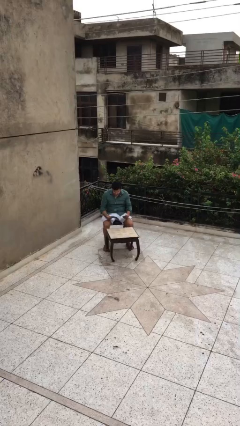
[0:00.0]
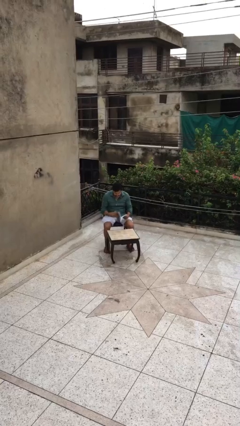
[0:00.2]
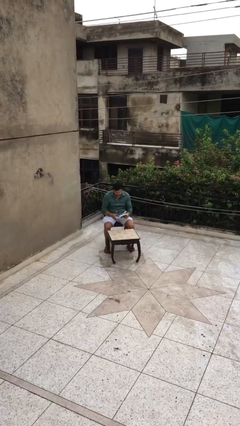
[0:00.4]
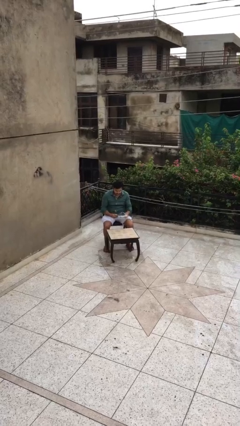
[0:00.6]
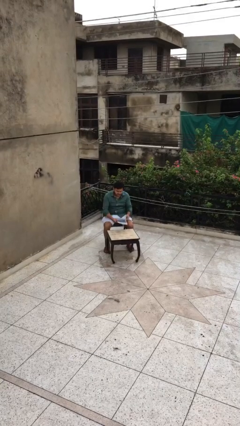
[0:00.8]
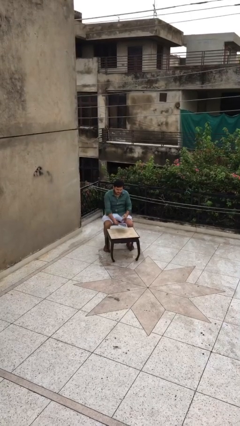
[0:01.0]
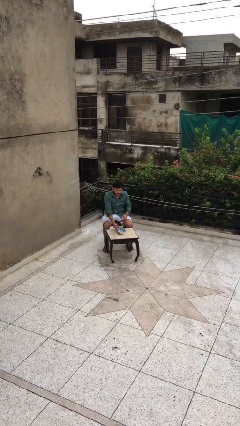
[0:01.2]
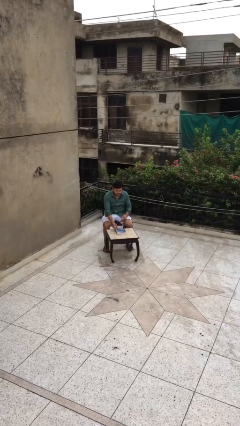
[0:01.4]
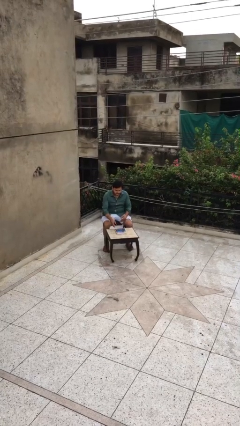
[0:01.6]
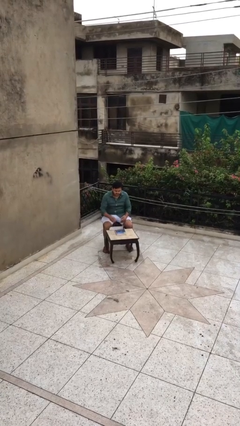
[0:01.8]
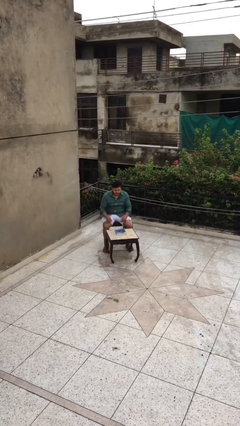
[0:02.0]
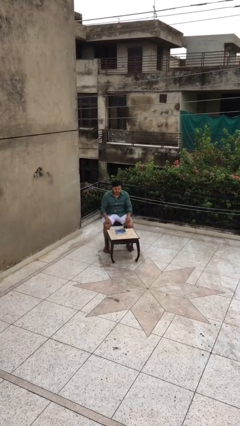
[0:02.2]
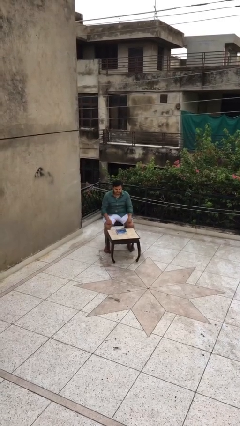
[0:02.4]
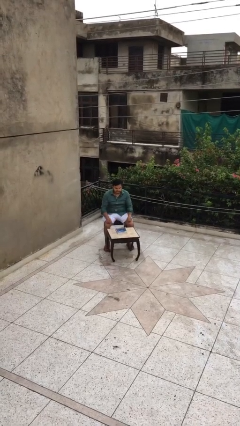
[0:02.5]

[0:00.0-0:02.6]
person puts down object on table

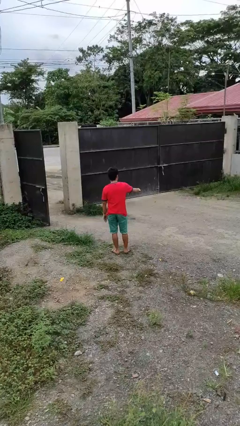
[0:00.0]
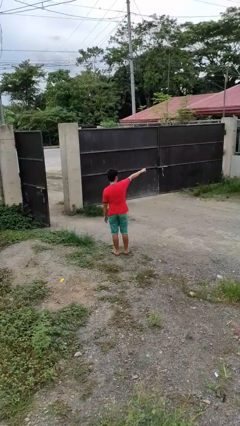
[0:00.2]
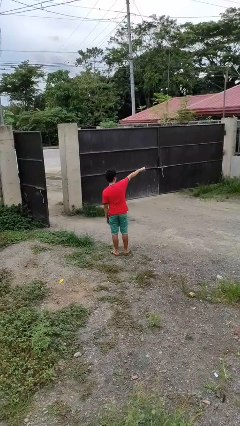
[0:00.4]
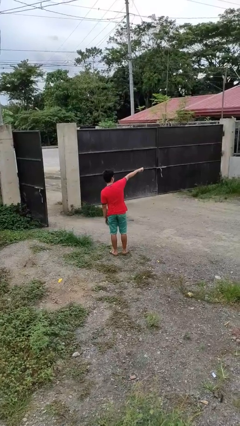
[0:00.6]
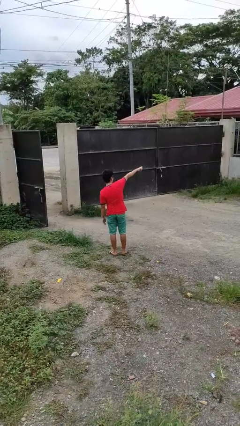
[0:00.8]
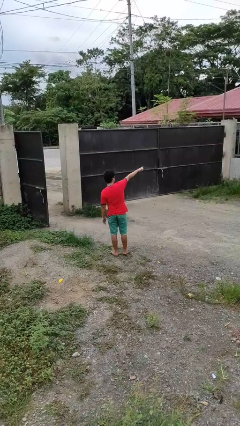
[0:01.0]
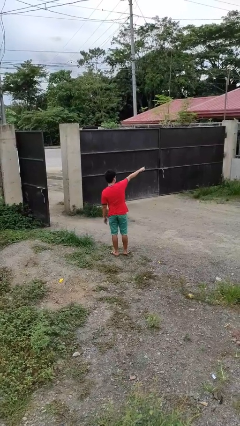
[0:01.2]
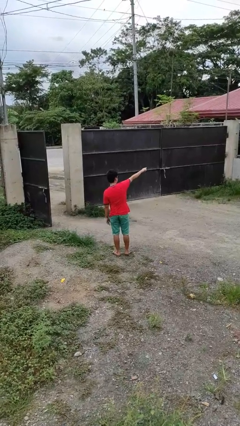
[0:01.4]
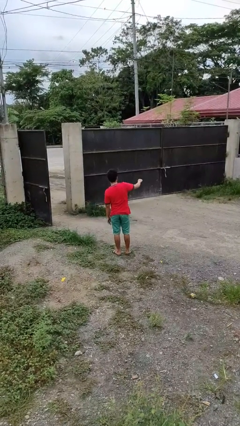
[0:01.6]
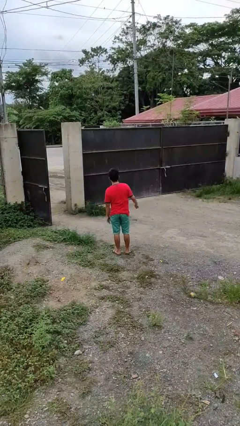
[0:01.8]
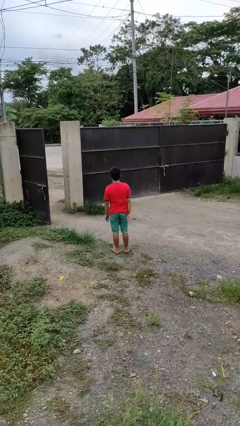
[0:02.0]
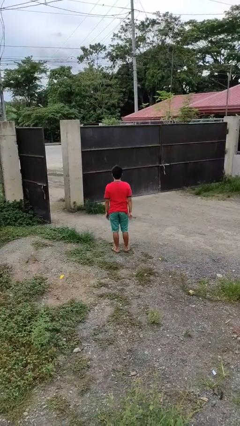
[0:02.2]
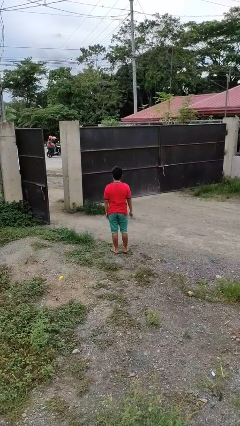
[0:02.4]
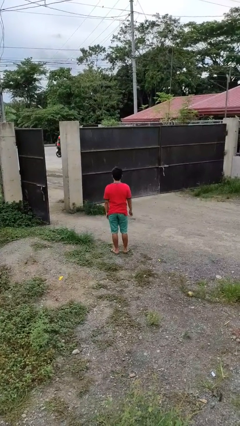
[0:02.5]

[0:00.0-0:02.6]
person points at person

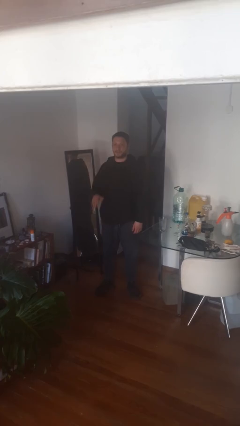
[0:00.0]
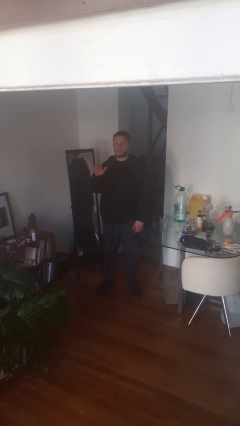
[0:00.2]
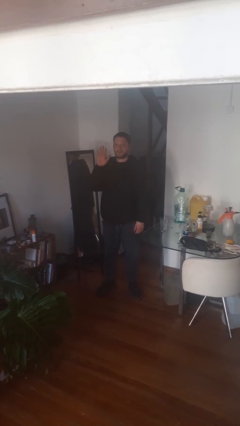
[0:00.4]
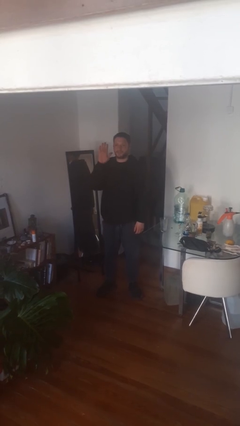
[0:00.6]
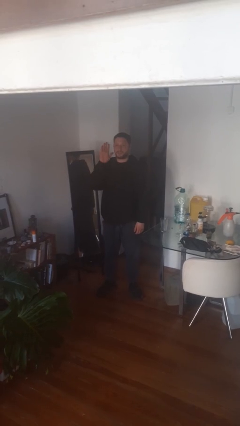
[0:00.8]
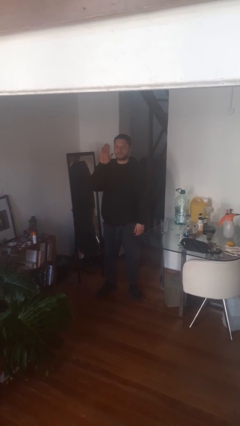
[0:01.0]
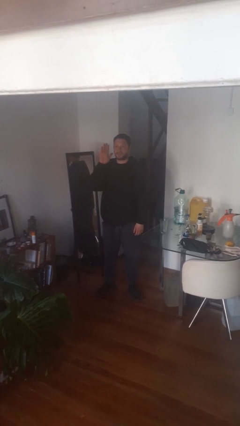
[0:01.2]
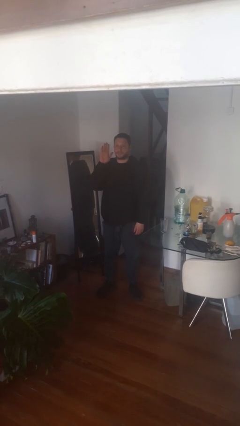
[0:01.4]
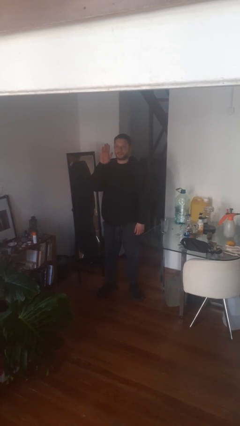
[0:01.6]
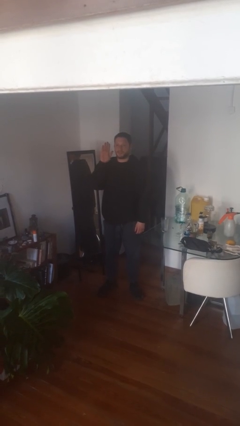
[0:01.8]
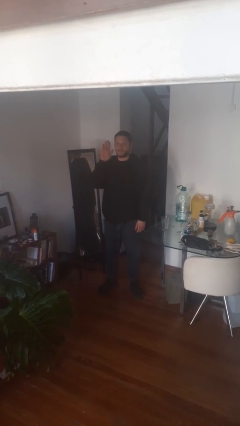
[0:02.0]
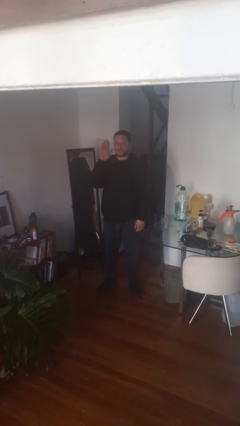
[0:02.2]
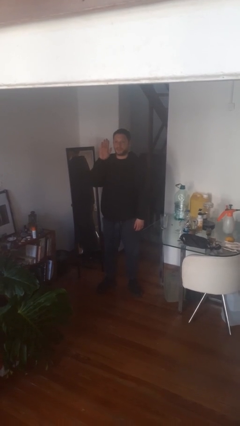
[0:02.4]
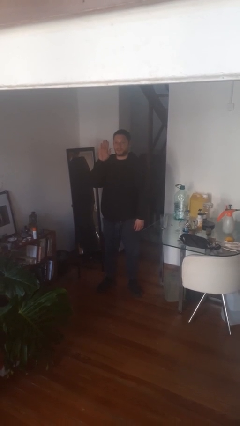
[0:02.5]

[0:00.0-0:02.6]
person gestures raise hand

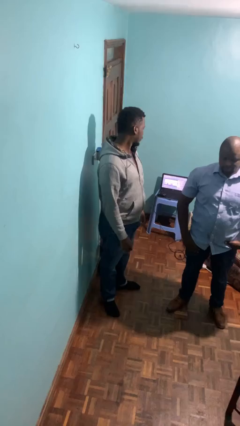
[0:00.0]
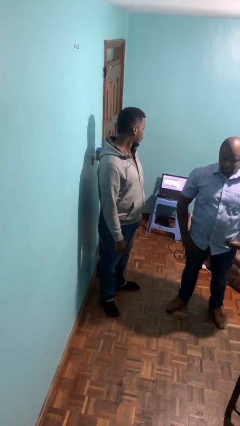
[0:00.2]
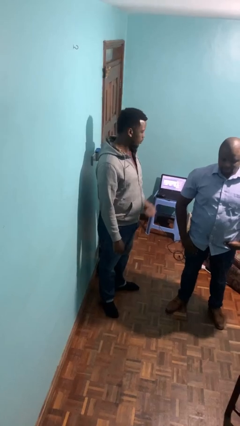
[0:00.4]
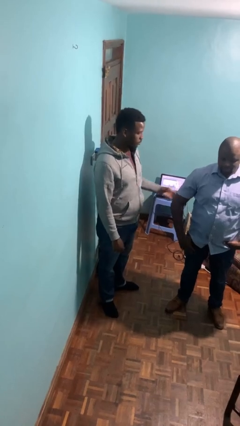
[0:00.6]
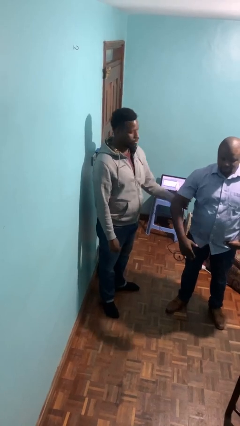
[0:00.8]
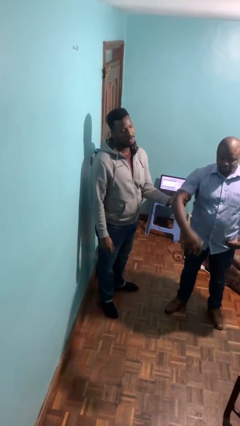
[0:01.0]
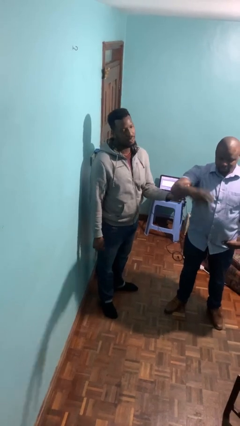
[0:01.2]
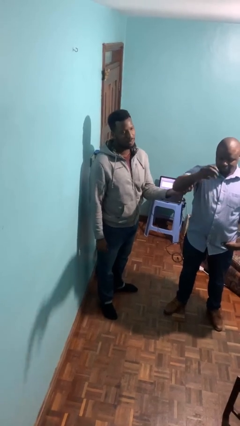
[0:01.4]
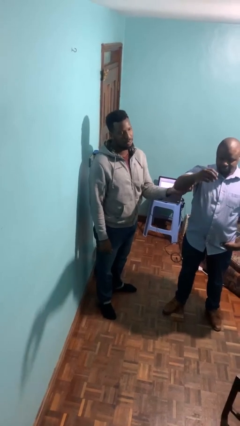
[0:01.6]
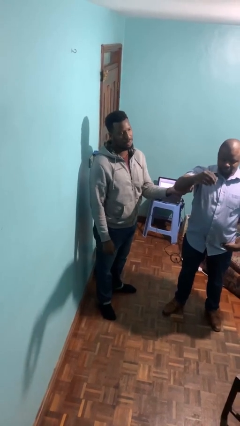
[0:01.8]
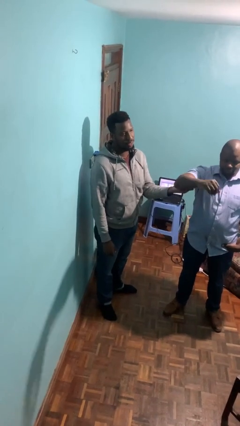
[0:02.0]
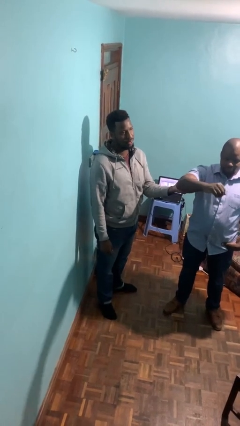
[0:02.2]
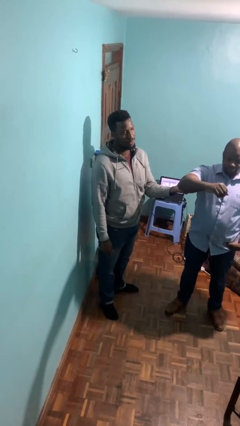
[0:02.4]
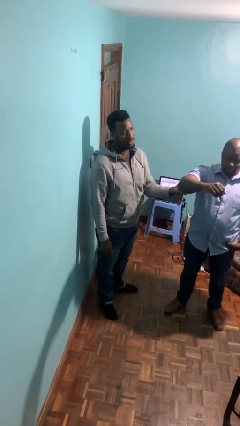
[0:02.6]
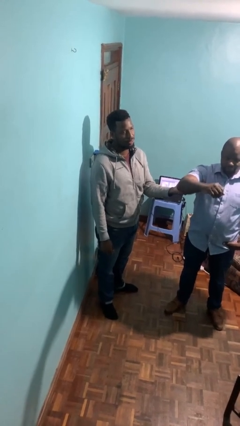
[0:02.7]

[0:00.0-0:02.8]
person grabs person by bicep

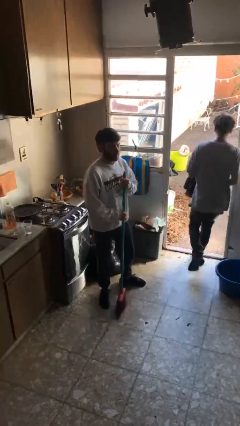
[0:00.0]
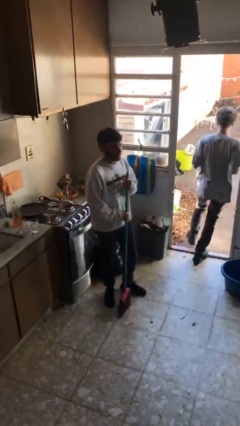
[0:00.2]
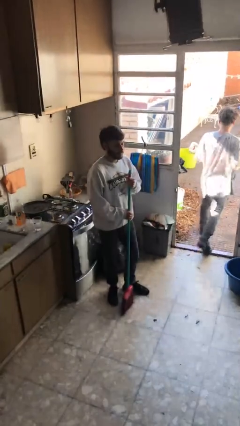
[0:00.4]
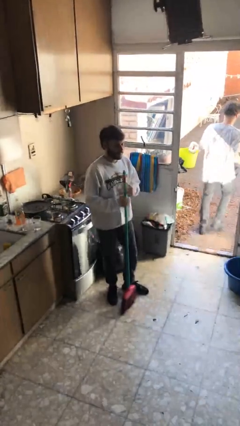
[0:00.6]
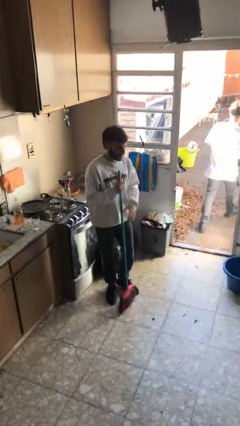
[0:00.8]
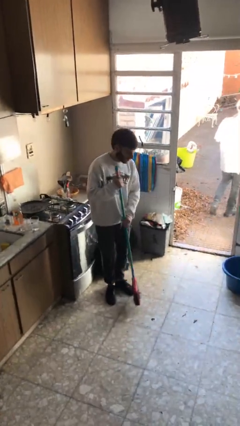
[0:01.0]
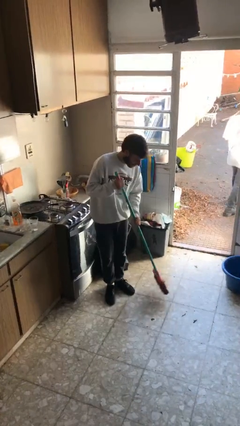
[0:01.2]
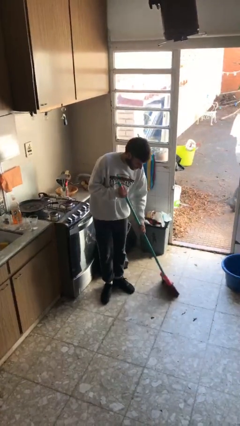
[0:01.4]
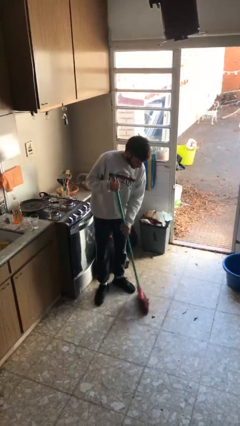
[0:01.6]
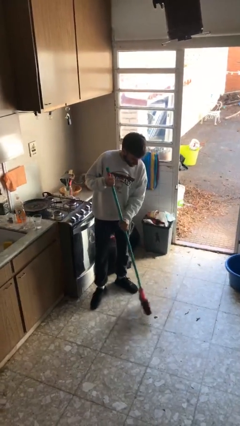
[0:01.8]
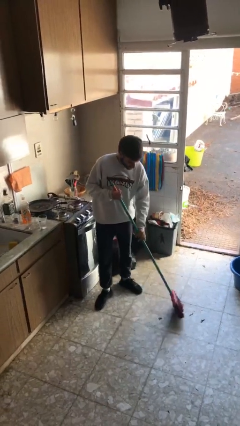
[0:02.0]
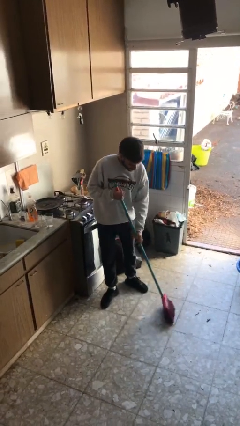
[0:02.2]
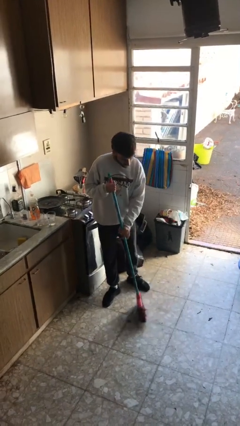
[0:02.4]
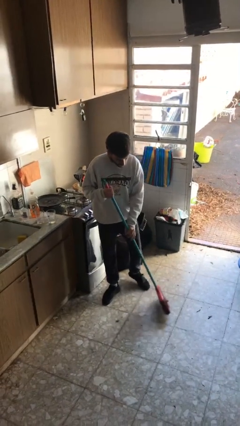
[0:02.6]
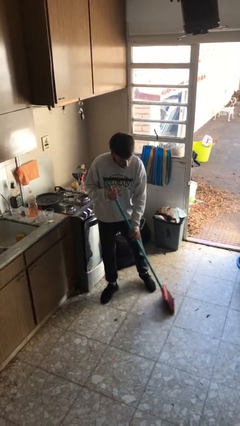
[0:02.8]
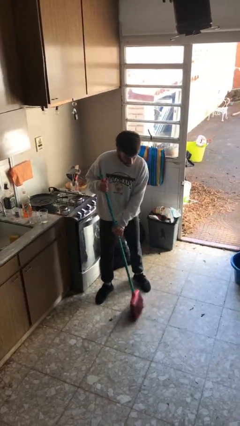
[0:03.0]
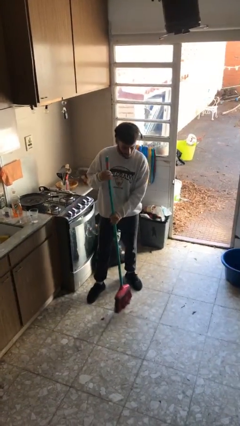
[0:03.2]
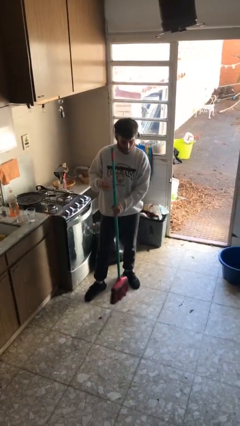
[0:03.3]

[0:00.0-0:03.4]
person sweeps floor

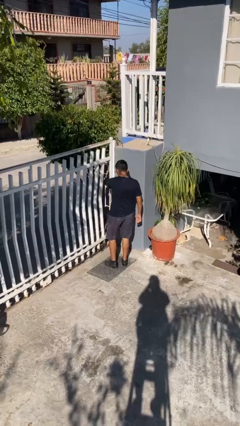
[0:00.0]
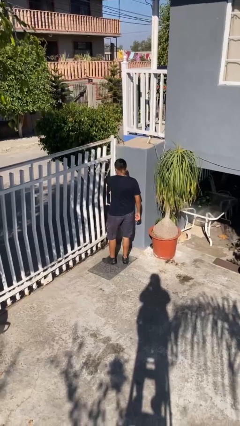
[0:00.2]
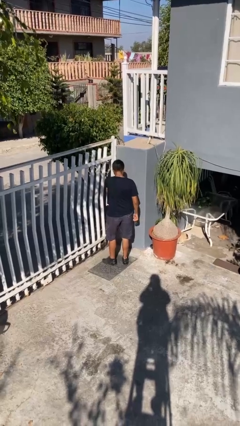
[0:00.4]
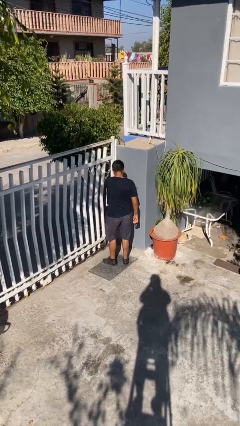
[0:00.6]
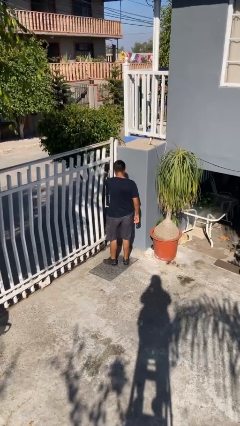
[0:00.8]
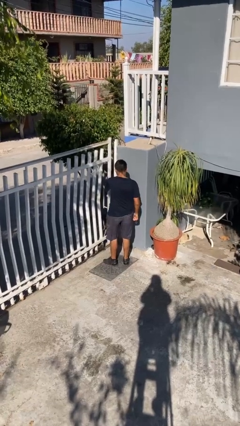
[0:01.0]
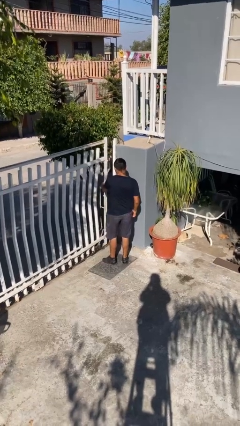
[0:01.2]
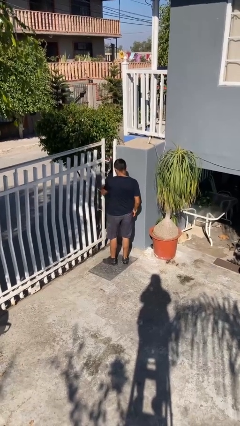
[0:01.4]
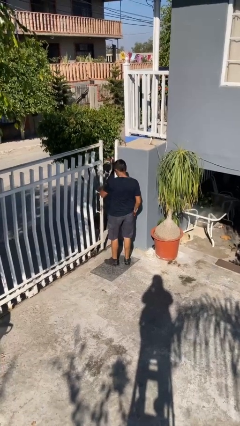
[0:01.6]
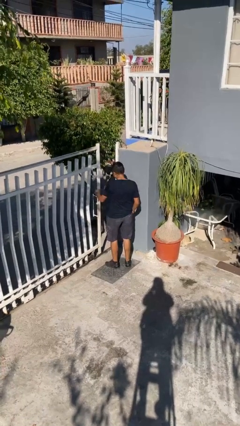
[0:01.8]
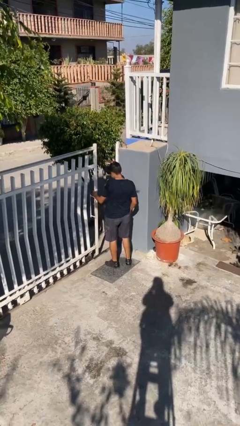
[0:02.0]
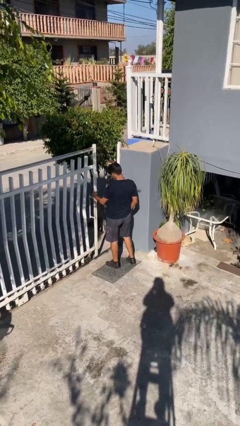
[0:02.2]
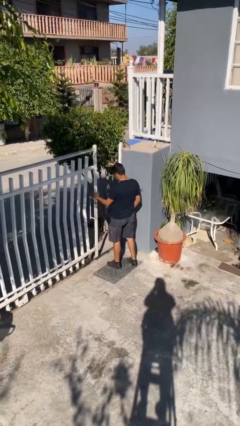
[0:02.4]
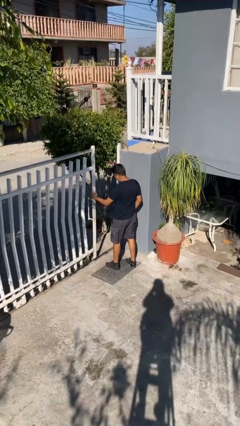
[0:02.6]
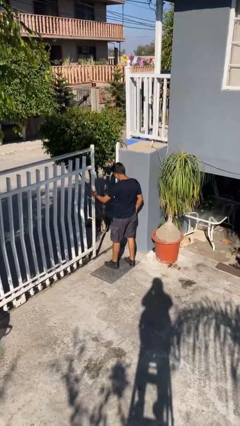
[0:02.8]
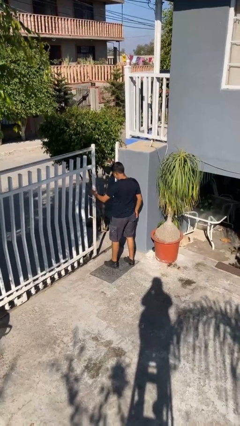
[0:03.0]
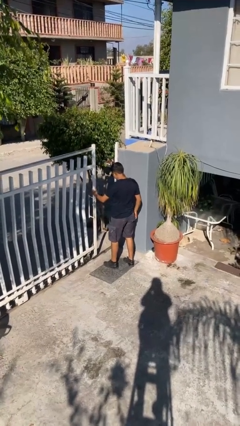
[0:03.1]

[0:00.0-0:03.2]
person opens facility door

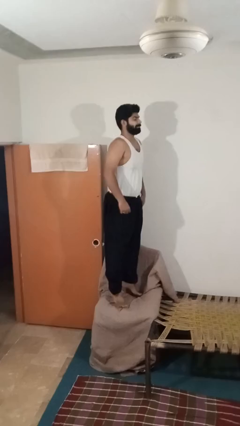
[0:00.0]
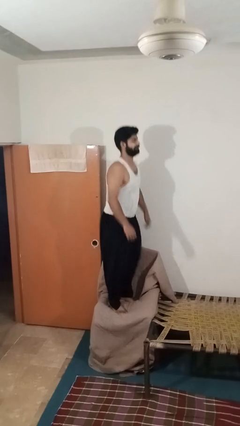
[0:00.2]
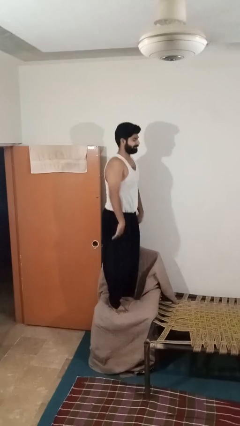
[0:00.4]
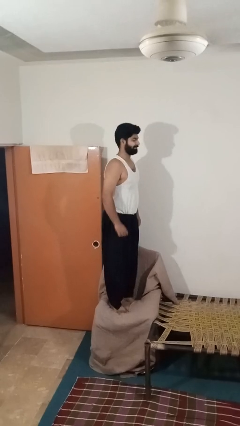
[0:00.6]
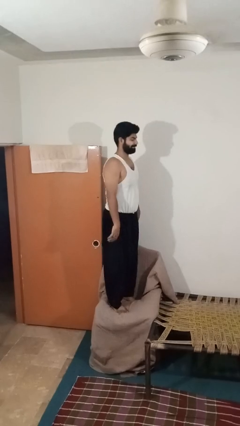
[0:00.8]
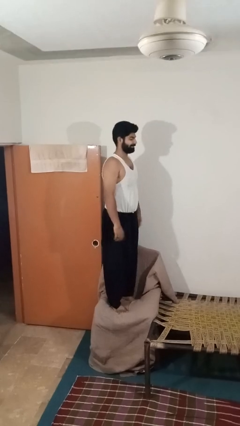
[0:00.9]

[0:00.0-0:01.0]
person jumps on couch
